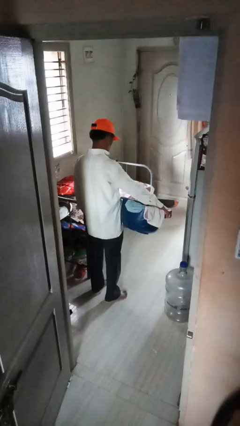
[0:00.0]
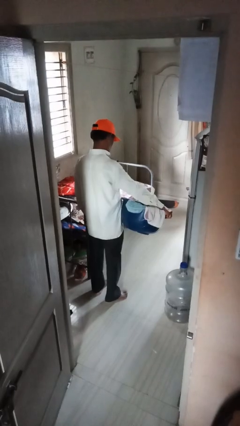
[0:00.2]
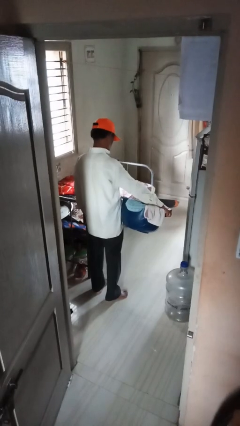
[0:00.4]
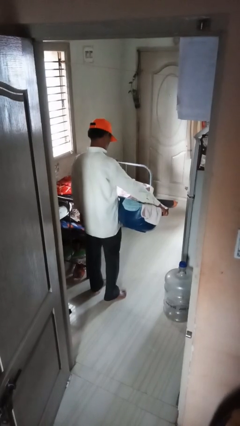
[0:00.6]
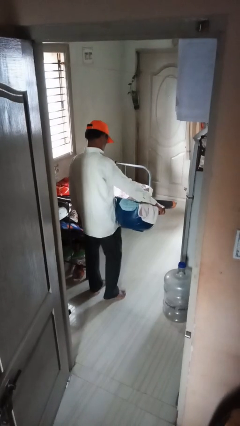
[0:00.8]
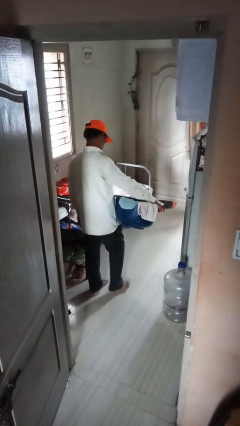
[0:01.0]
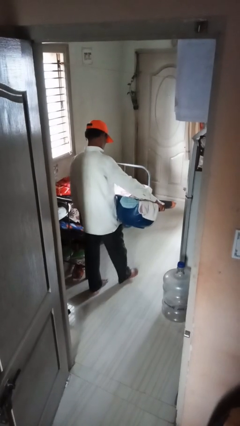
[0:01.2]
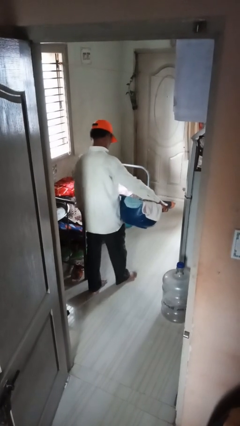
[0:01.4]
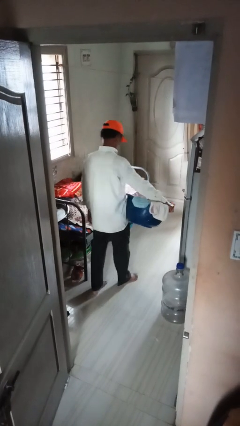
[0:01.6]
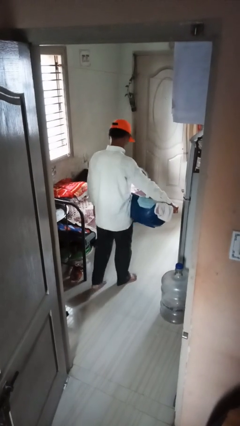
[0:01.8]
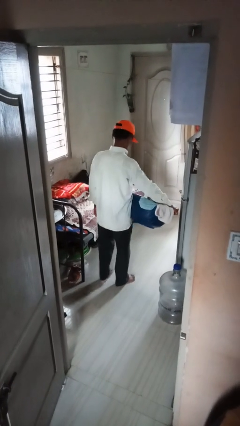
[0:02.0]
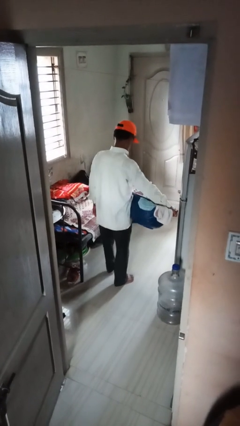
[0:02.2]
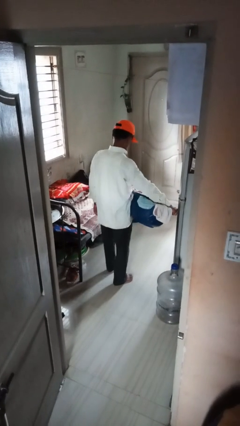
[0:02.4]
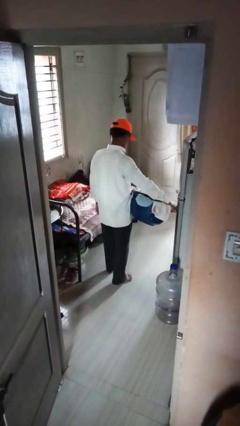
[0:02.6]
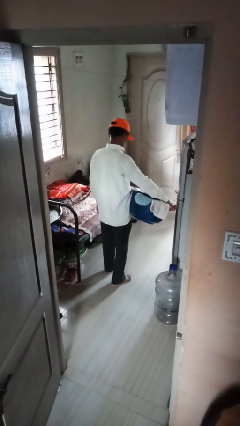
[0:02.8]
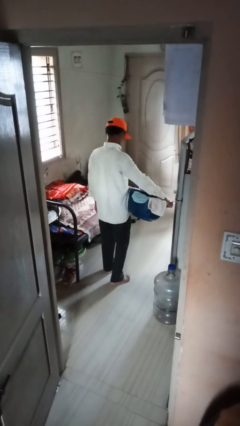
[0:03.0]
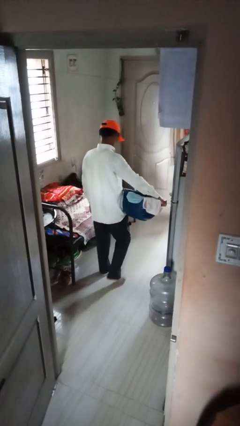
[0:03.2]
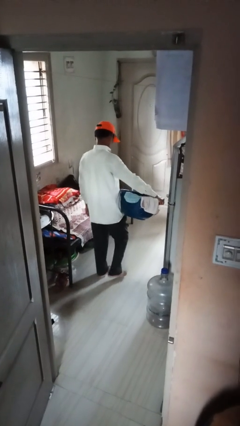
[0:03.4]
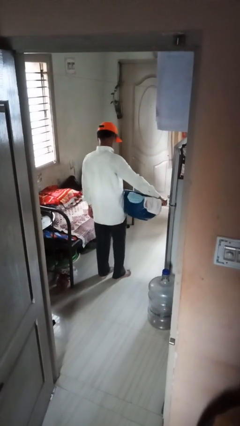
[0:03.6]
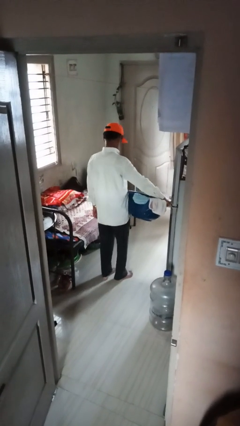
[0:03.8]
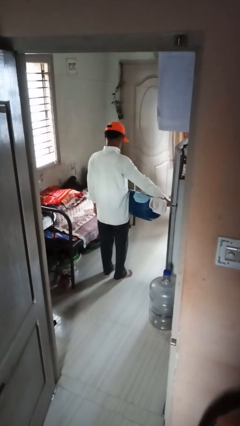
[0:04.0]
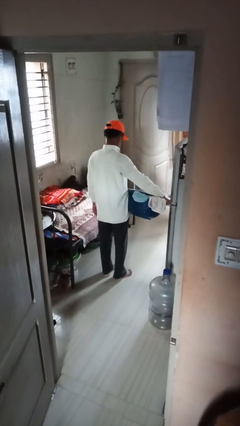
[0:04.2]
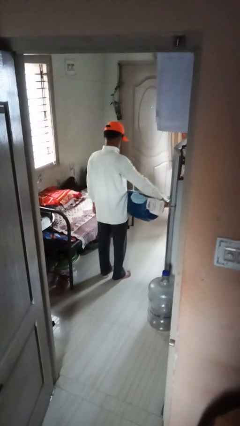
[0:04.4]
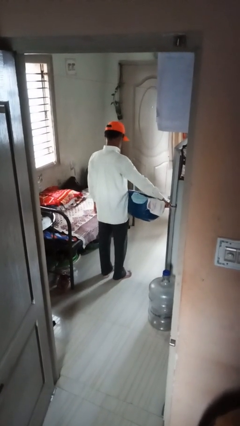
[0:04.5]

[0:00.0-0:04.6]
person carries laundry basket

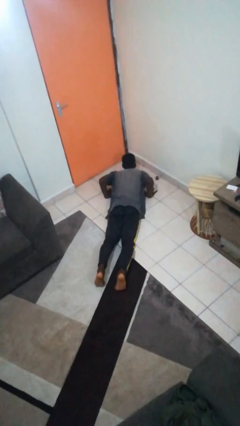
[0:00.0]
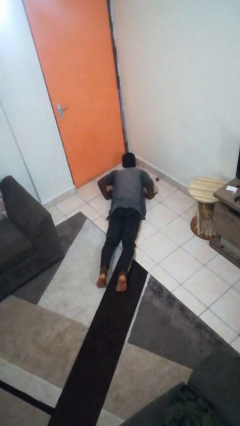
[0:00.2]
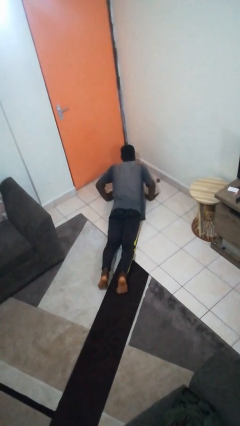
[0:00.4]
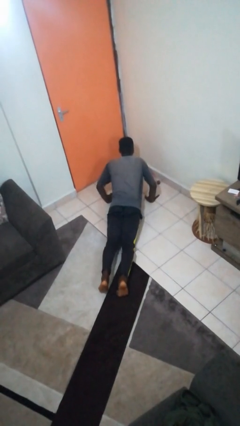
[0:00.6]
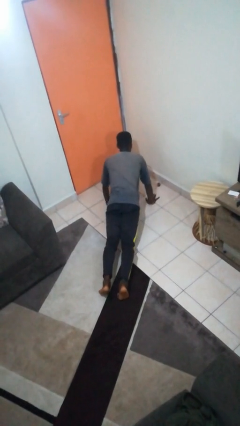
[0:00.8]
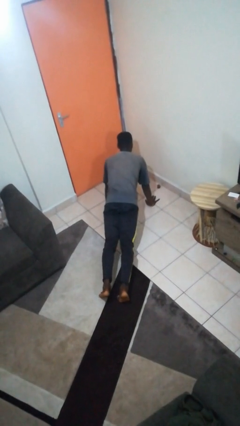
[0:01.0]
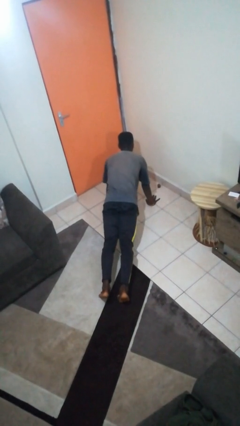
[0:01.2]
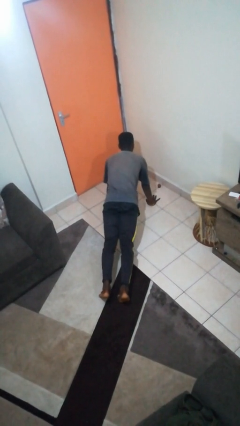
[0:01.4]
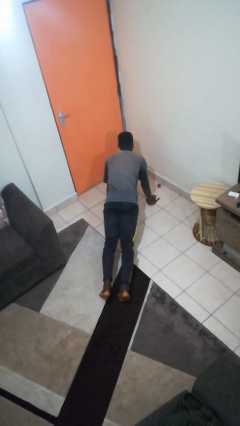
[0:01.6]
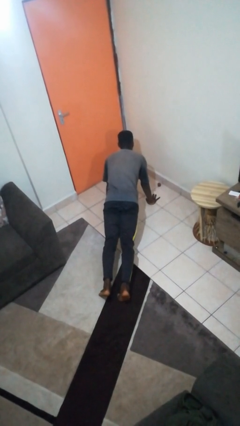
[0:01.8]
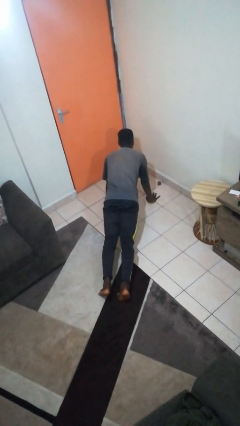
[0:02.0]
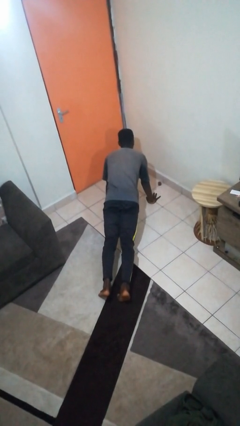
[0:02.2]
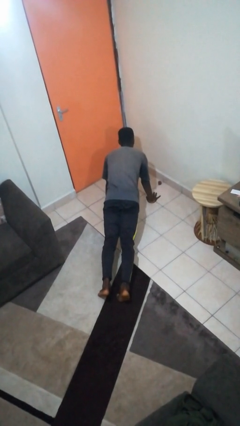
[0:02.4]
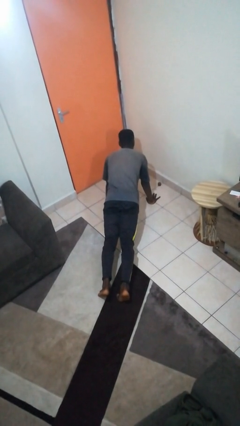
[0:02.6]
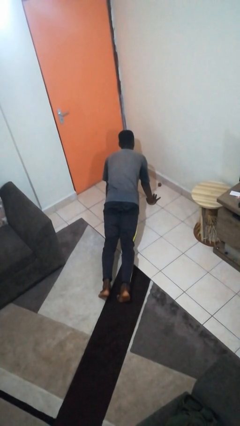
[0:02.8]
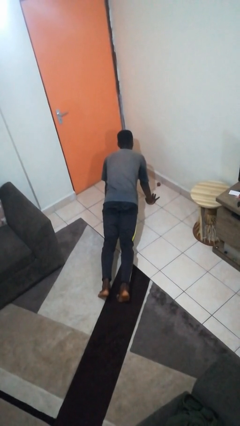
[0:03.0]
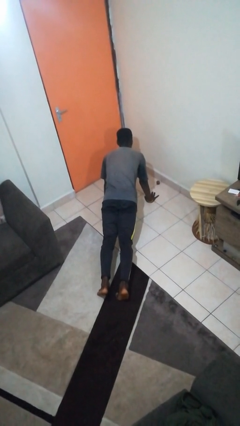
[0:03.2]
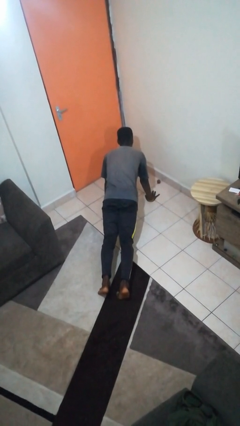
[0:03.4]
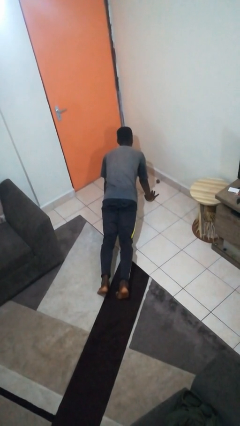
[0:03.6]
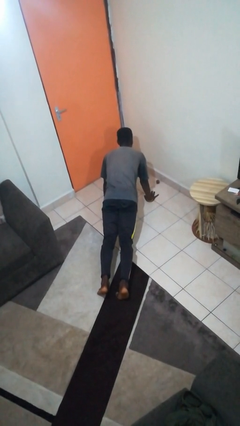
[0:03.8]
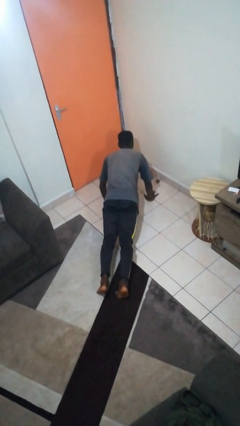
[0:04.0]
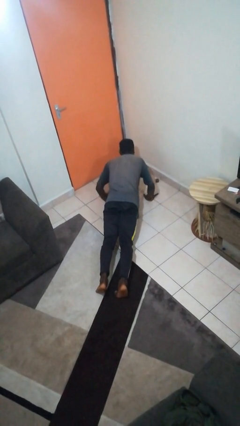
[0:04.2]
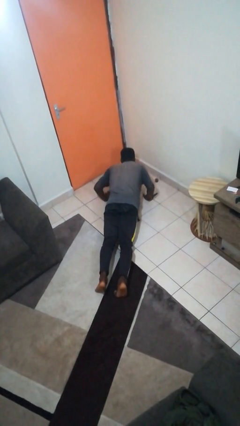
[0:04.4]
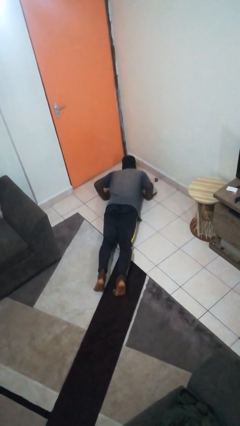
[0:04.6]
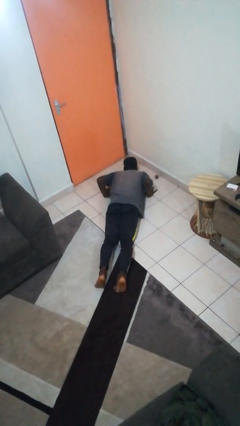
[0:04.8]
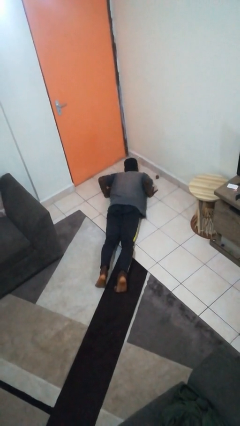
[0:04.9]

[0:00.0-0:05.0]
person exercises with pushup

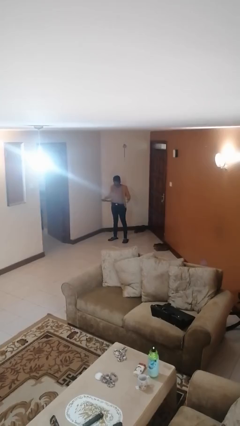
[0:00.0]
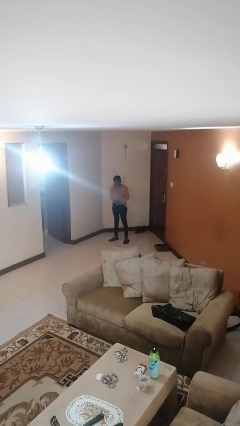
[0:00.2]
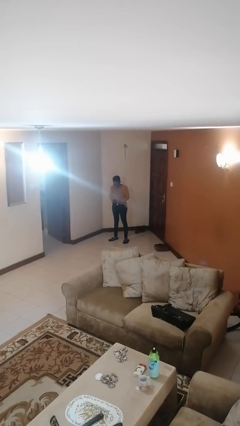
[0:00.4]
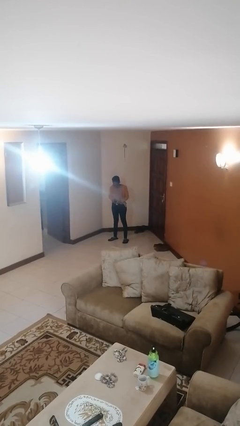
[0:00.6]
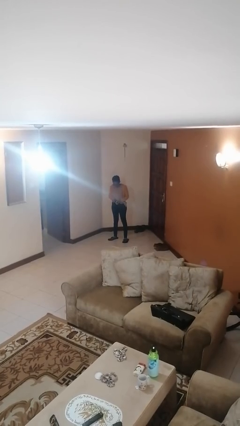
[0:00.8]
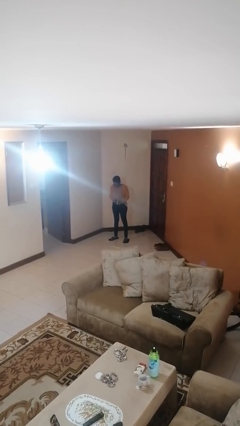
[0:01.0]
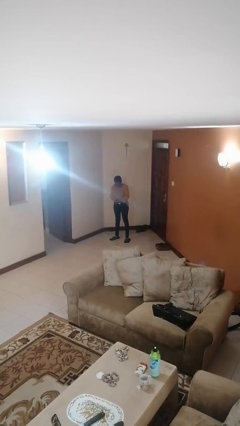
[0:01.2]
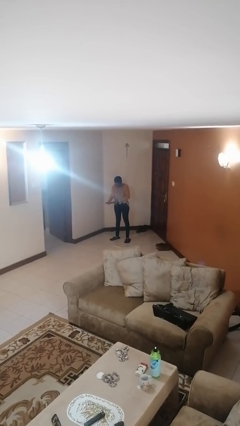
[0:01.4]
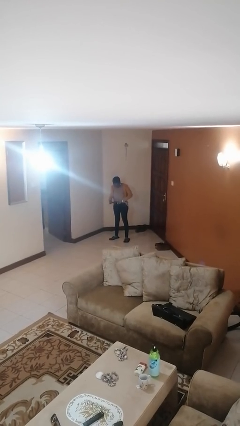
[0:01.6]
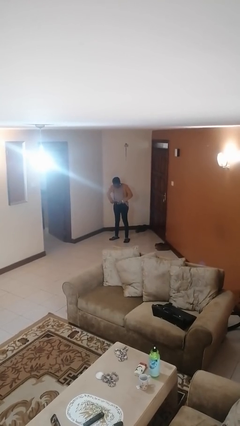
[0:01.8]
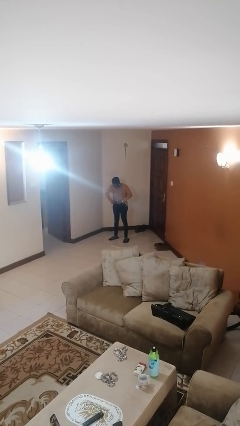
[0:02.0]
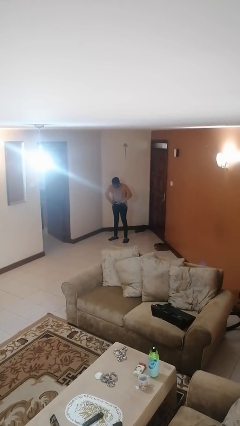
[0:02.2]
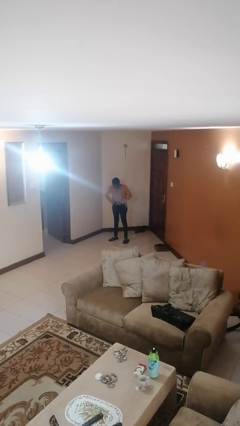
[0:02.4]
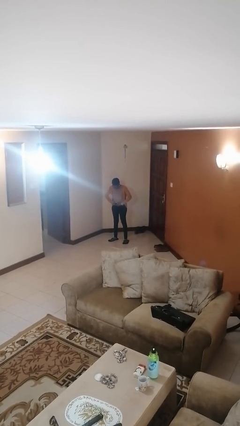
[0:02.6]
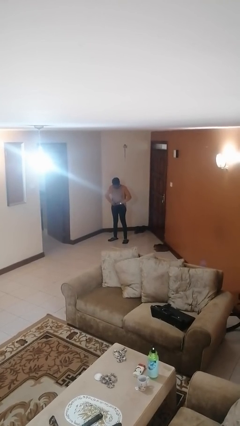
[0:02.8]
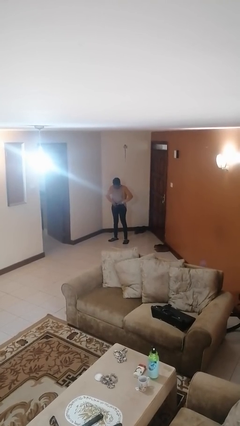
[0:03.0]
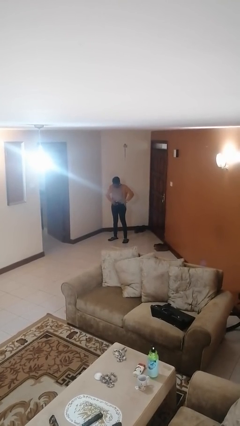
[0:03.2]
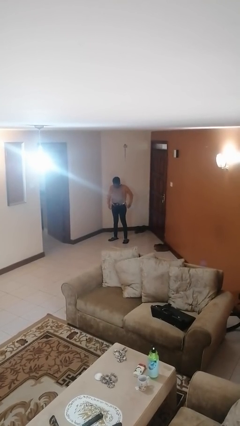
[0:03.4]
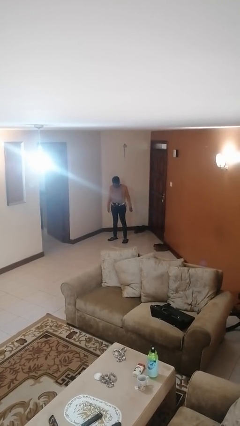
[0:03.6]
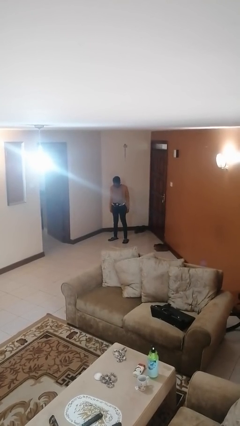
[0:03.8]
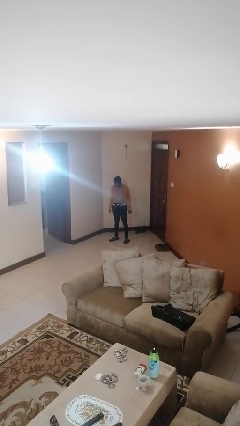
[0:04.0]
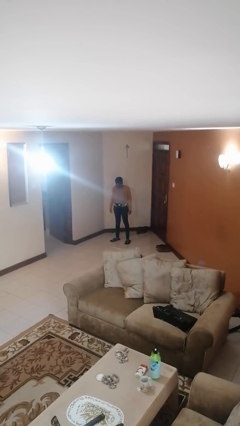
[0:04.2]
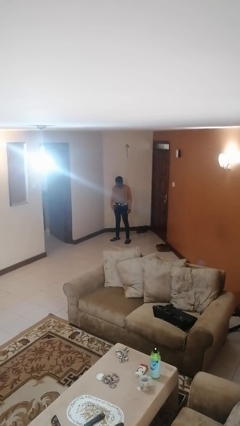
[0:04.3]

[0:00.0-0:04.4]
person puts on belt

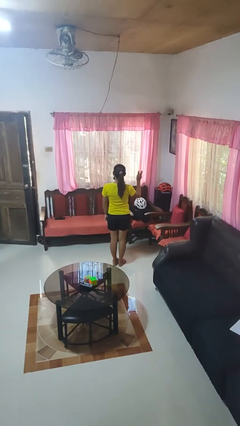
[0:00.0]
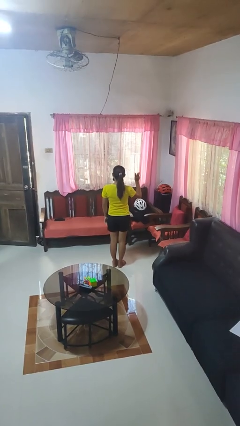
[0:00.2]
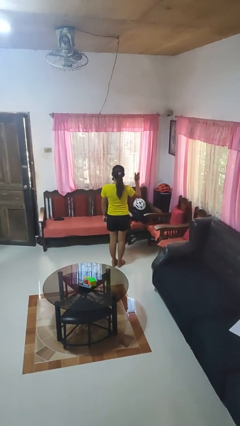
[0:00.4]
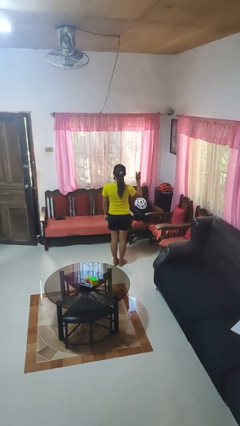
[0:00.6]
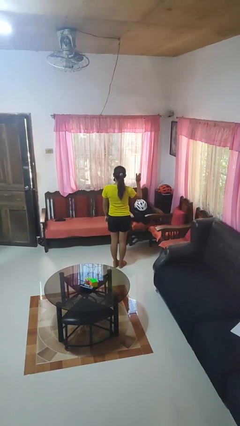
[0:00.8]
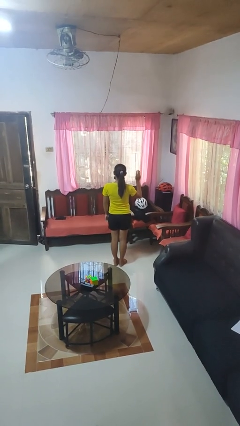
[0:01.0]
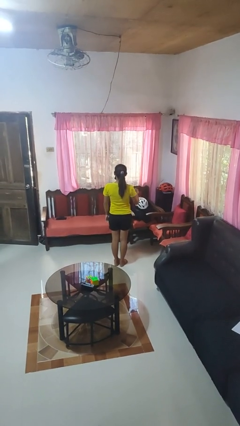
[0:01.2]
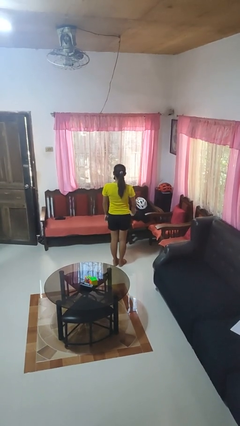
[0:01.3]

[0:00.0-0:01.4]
person gestures number three

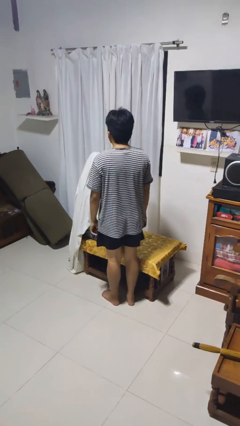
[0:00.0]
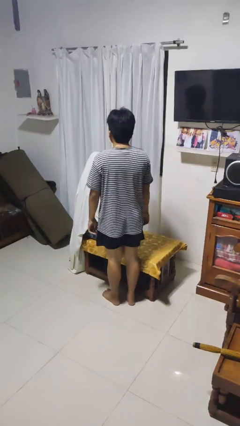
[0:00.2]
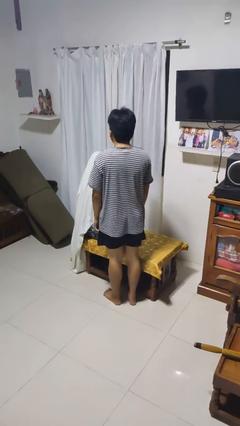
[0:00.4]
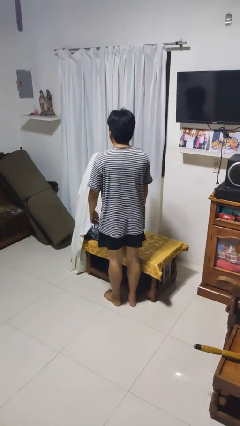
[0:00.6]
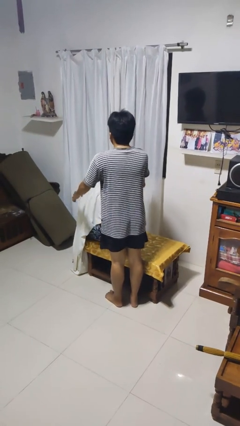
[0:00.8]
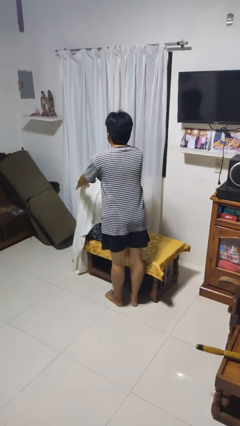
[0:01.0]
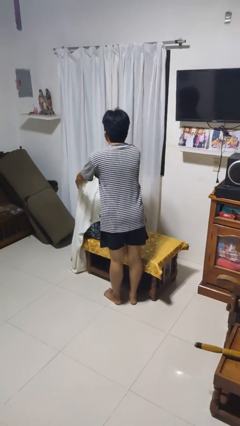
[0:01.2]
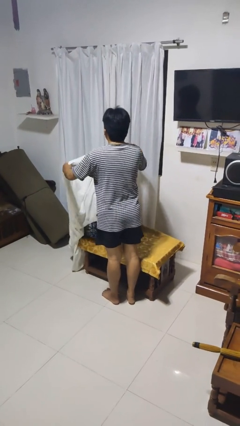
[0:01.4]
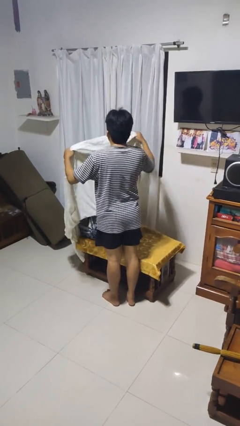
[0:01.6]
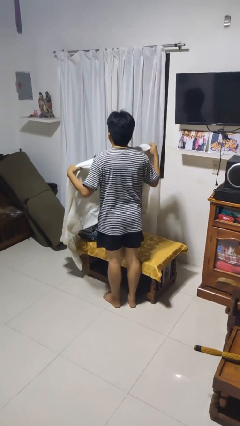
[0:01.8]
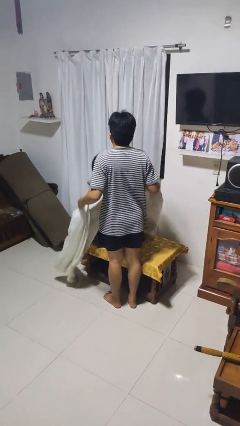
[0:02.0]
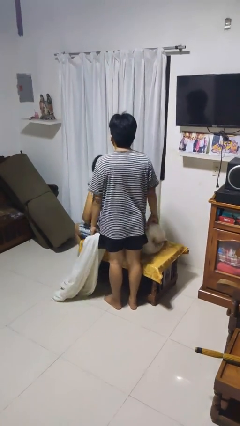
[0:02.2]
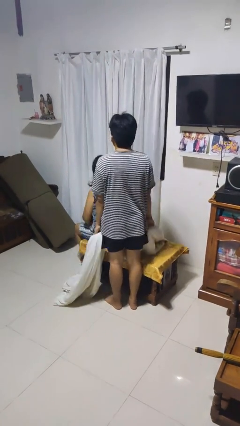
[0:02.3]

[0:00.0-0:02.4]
person uncovers friend with blanket
